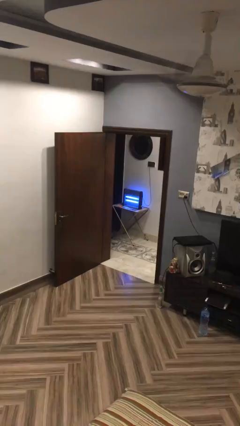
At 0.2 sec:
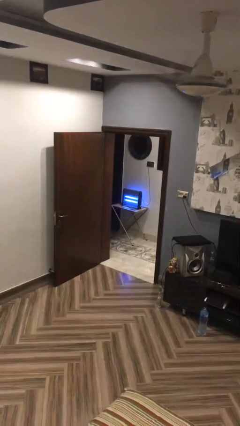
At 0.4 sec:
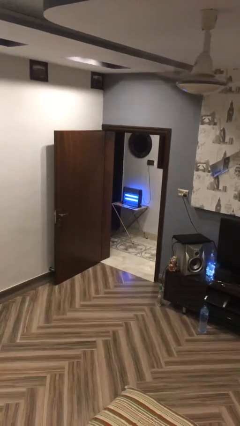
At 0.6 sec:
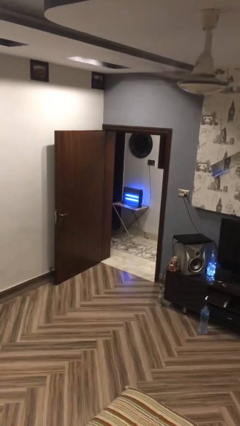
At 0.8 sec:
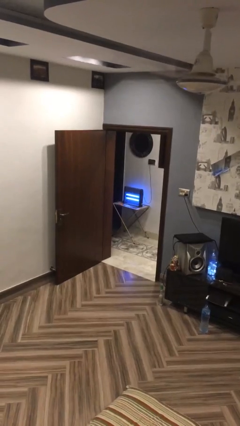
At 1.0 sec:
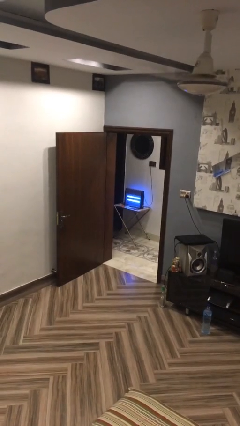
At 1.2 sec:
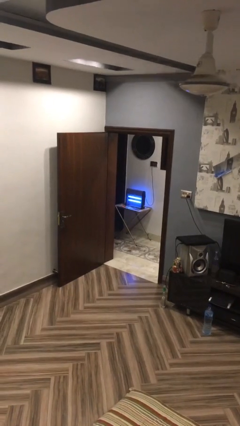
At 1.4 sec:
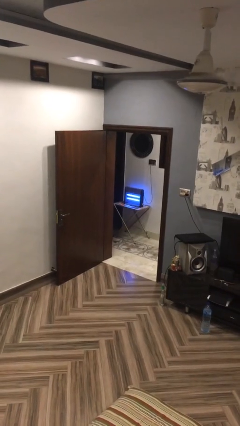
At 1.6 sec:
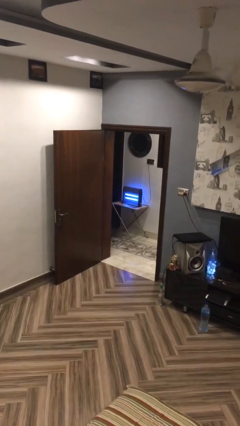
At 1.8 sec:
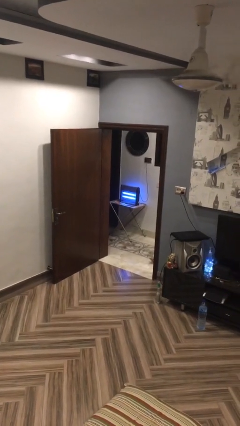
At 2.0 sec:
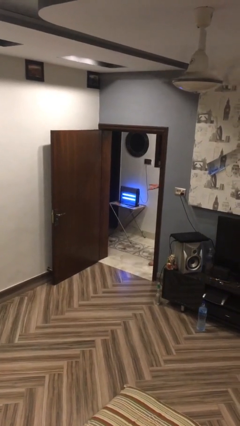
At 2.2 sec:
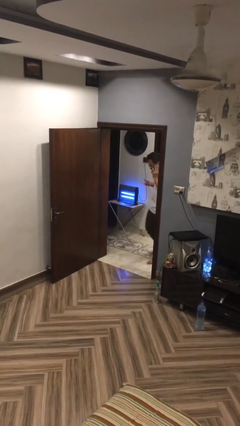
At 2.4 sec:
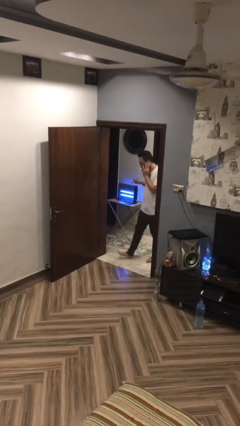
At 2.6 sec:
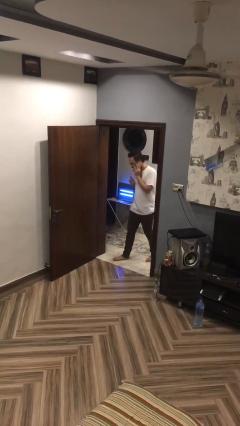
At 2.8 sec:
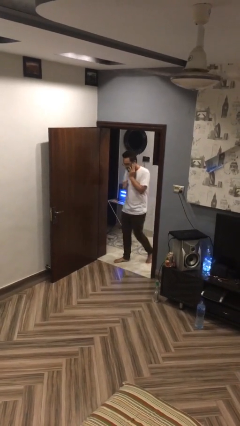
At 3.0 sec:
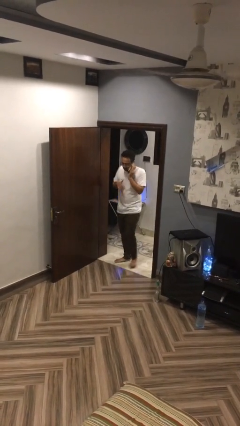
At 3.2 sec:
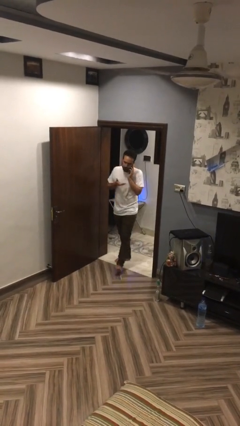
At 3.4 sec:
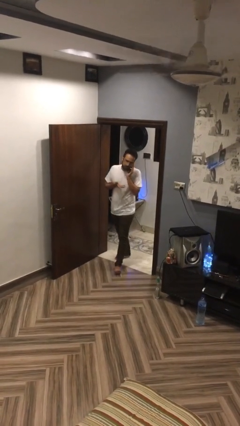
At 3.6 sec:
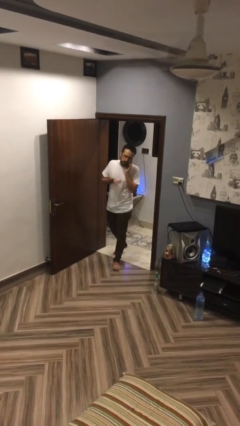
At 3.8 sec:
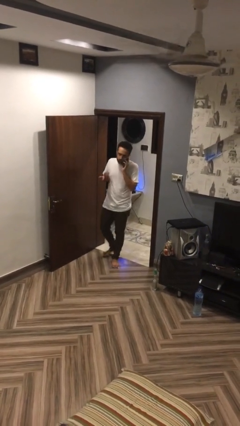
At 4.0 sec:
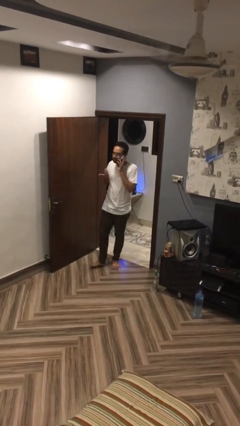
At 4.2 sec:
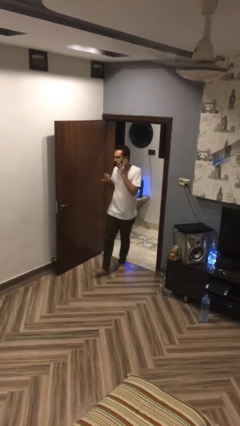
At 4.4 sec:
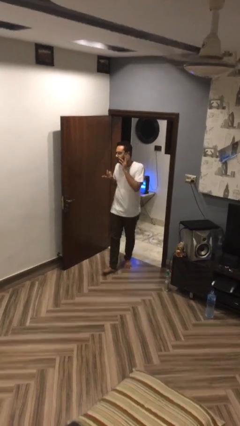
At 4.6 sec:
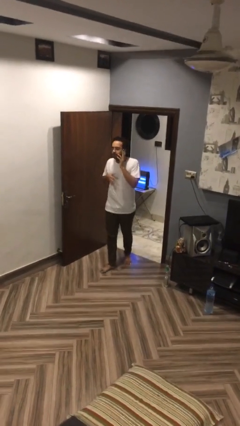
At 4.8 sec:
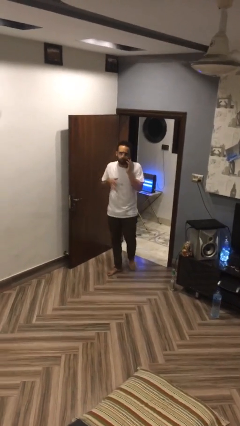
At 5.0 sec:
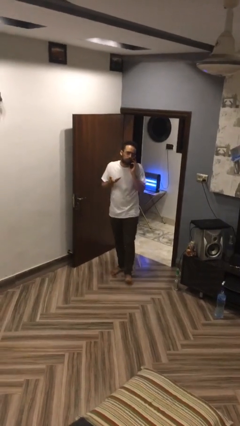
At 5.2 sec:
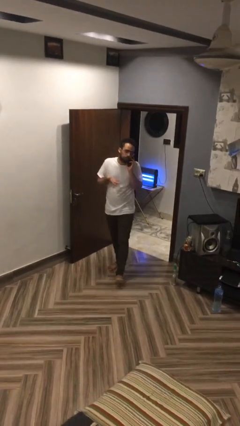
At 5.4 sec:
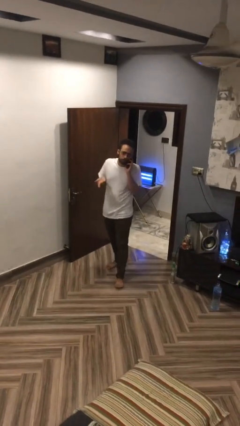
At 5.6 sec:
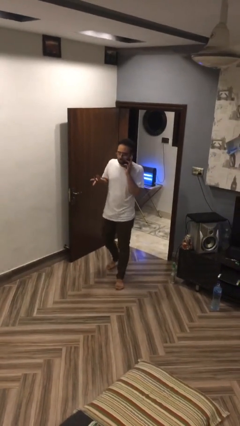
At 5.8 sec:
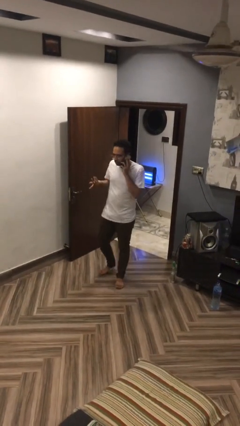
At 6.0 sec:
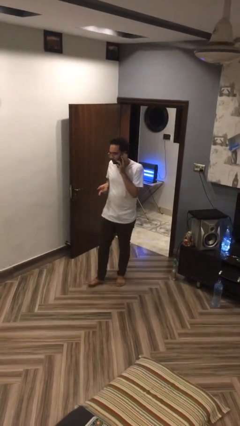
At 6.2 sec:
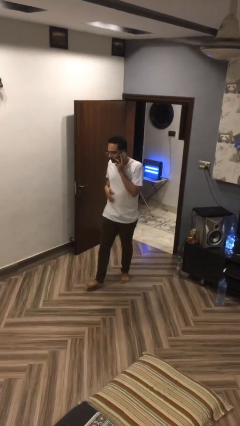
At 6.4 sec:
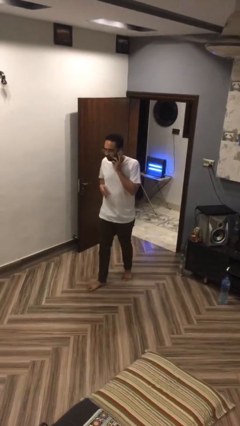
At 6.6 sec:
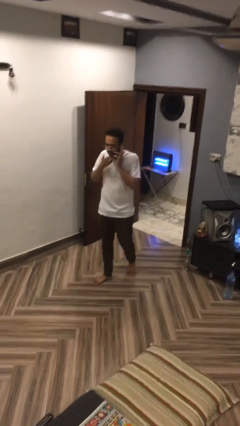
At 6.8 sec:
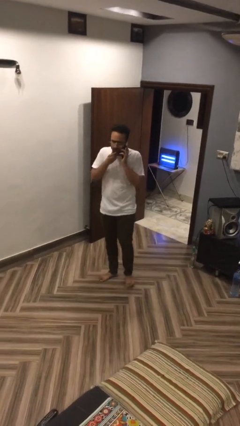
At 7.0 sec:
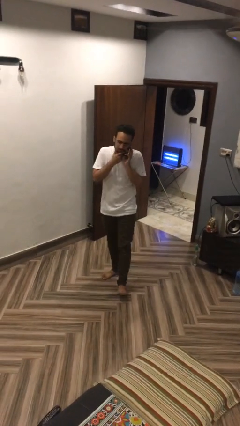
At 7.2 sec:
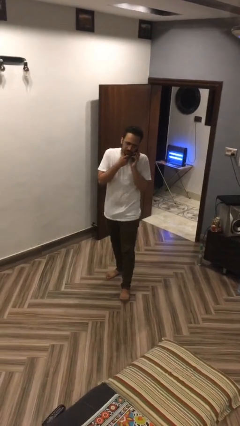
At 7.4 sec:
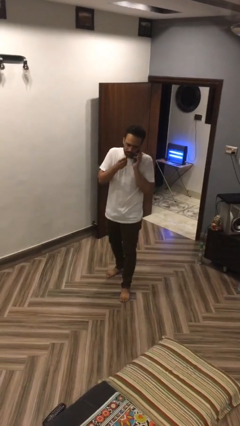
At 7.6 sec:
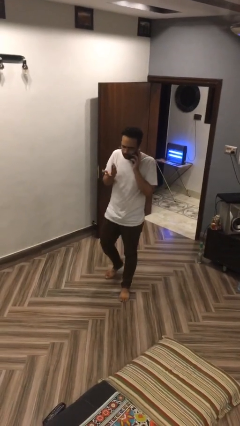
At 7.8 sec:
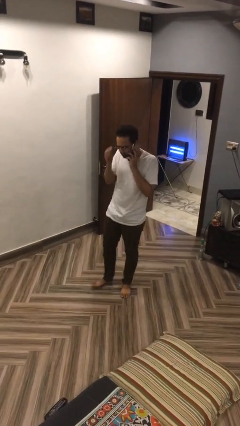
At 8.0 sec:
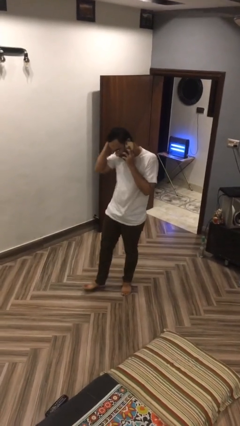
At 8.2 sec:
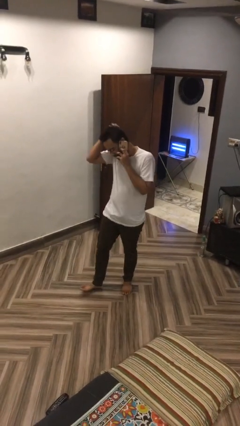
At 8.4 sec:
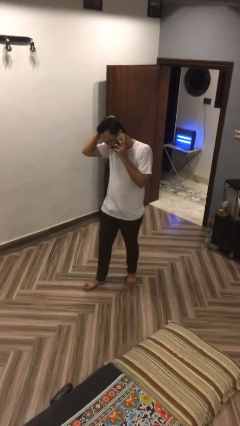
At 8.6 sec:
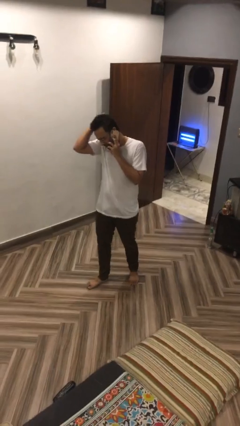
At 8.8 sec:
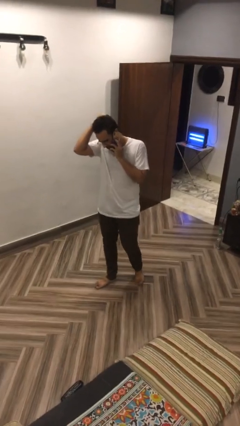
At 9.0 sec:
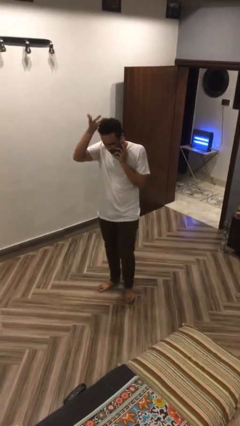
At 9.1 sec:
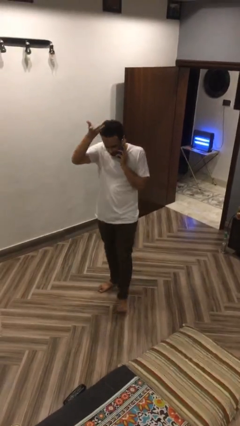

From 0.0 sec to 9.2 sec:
person enters scene through structure

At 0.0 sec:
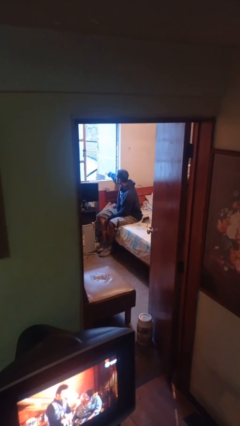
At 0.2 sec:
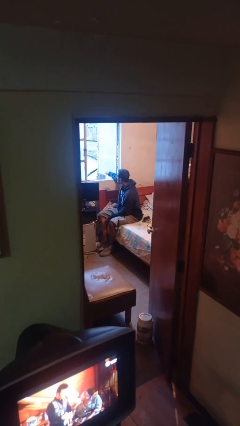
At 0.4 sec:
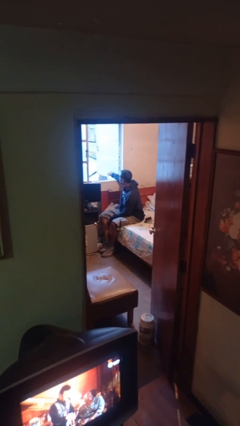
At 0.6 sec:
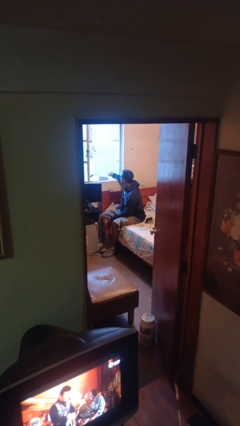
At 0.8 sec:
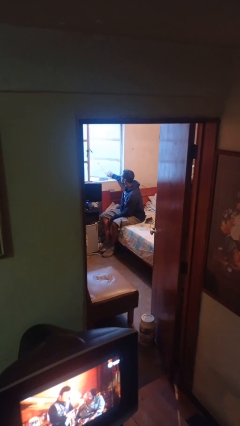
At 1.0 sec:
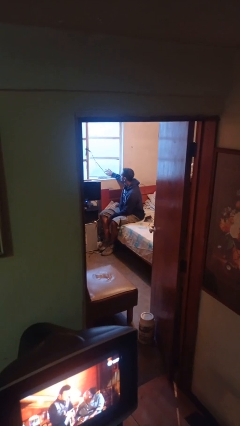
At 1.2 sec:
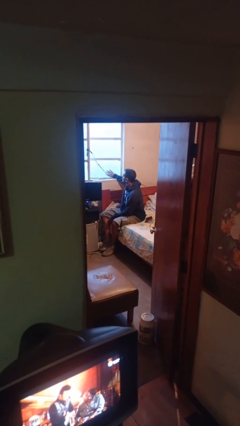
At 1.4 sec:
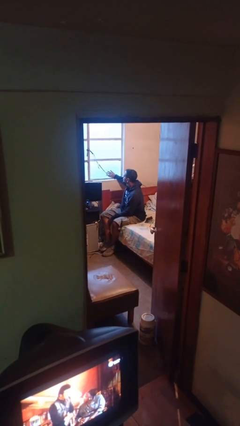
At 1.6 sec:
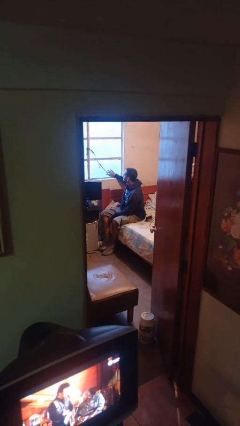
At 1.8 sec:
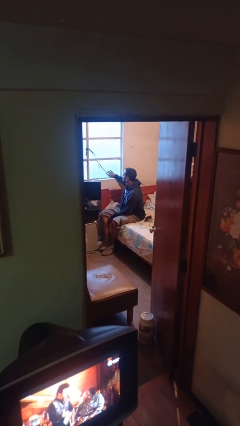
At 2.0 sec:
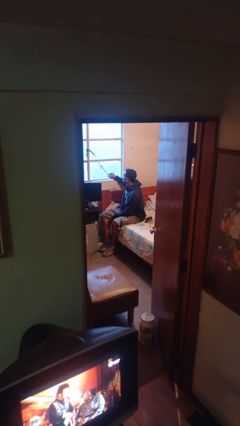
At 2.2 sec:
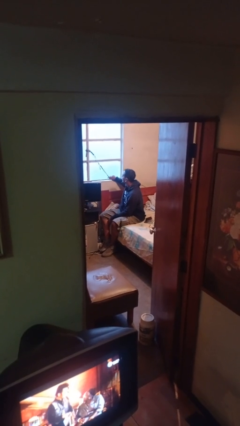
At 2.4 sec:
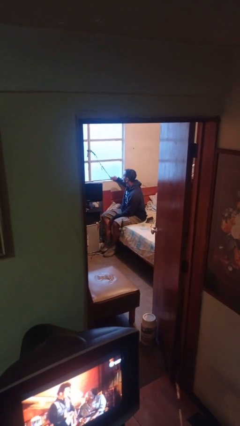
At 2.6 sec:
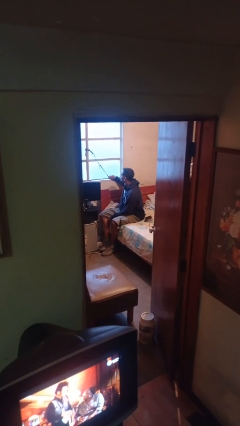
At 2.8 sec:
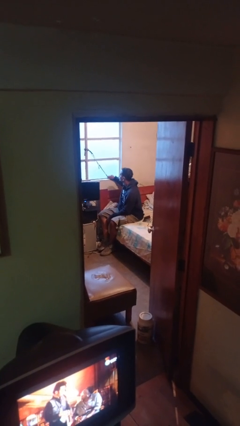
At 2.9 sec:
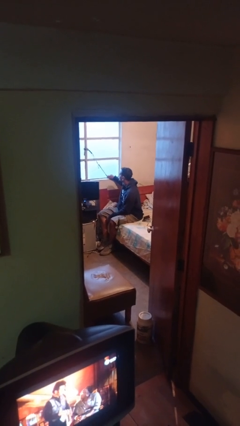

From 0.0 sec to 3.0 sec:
person closes home window

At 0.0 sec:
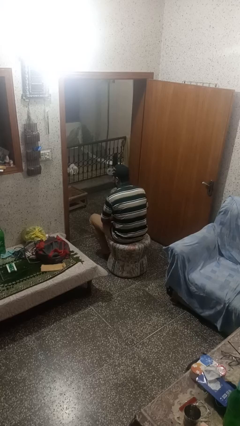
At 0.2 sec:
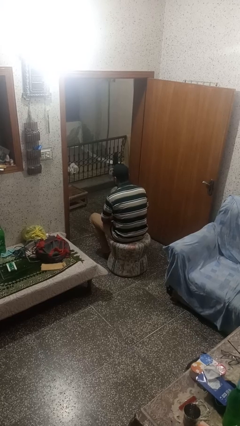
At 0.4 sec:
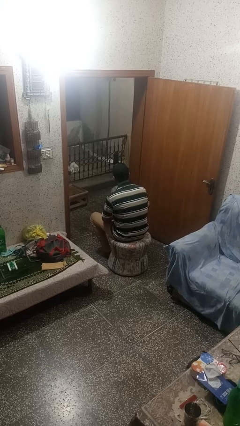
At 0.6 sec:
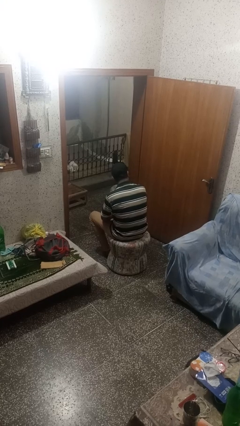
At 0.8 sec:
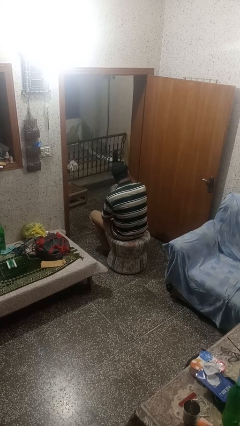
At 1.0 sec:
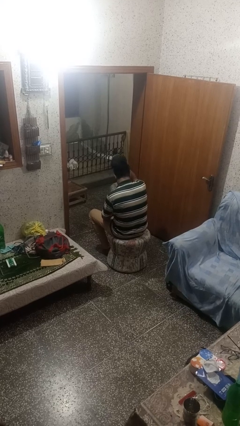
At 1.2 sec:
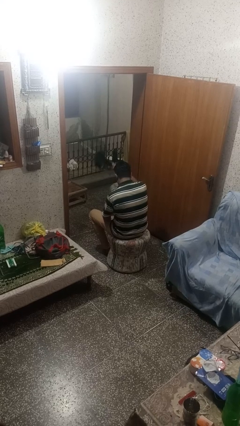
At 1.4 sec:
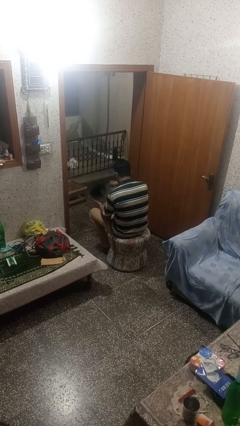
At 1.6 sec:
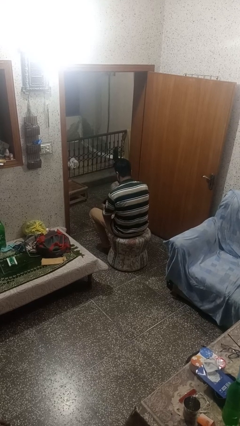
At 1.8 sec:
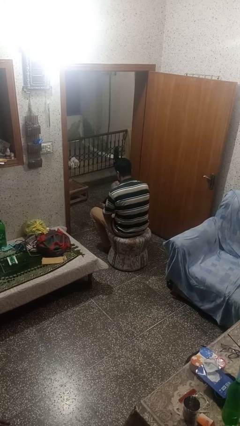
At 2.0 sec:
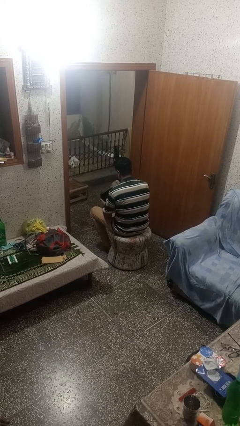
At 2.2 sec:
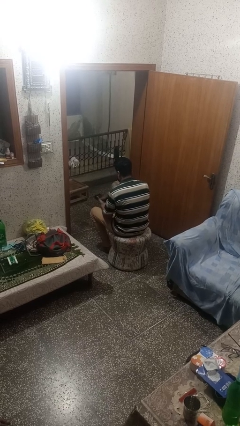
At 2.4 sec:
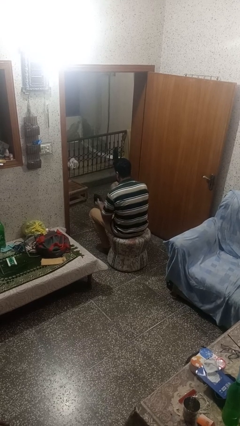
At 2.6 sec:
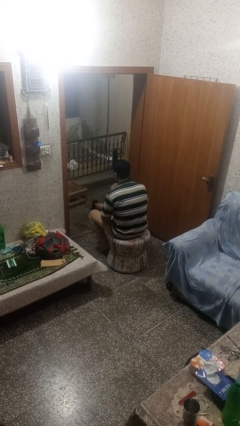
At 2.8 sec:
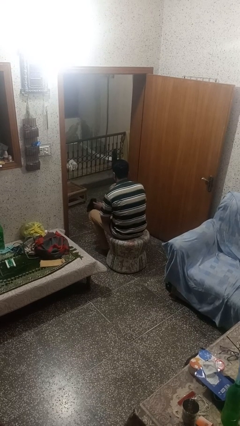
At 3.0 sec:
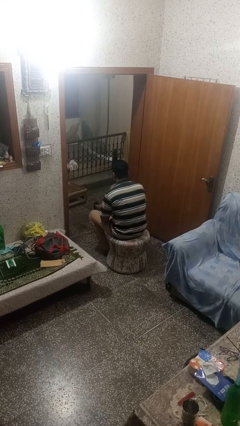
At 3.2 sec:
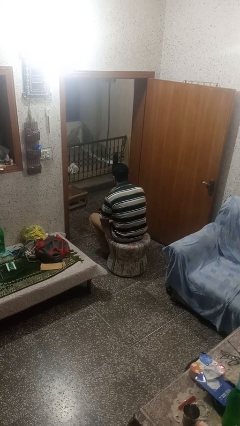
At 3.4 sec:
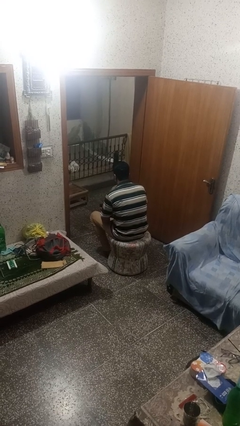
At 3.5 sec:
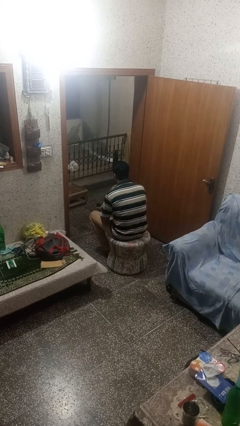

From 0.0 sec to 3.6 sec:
person takes off hat

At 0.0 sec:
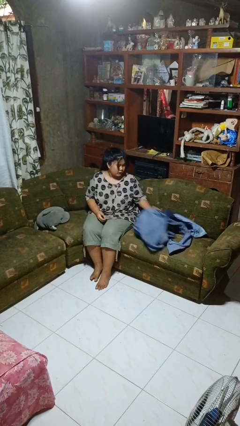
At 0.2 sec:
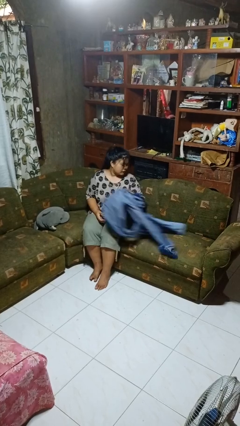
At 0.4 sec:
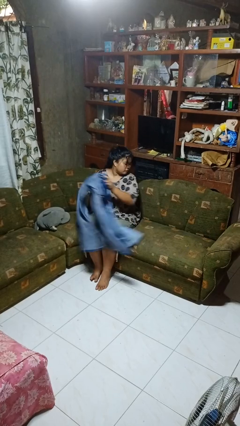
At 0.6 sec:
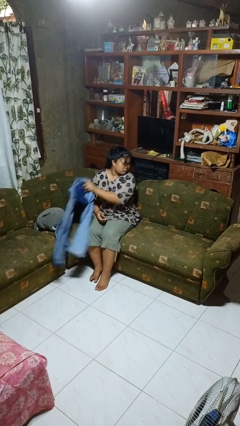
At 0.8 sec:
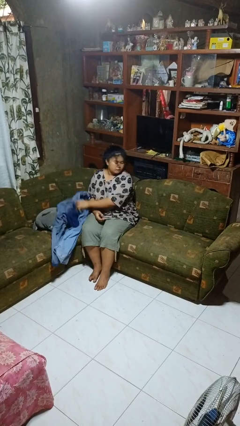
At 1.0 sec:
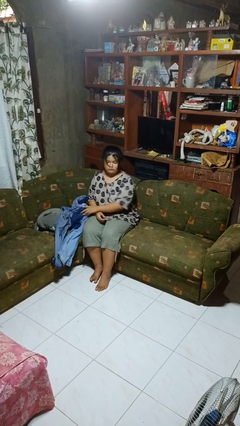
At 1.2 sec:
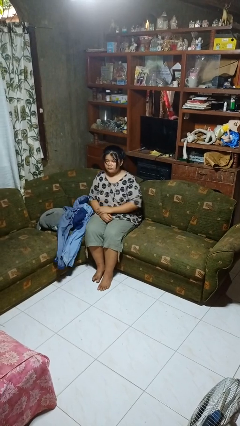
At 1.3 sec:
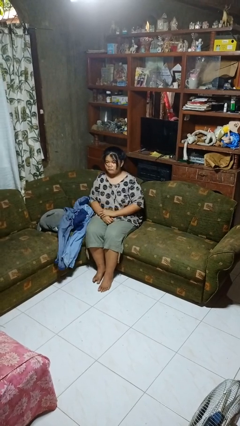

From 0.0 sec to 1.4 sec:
person searches in couch

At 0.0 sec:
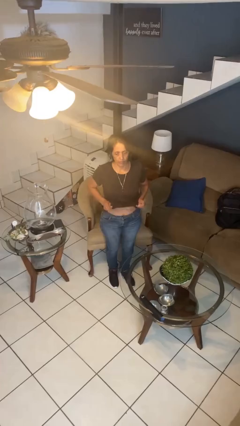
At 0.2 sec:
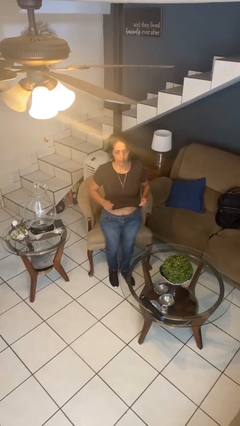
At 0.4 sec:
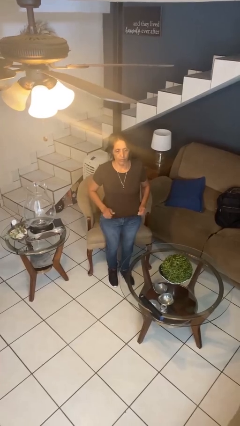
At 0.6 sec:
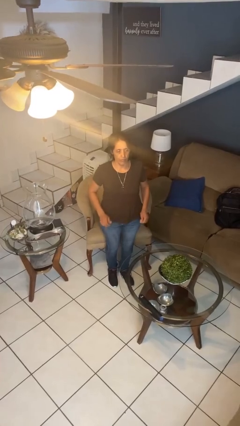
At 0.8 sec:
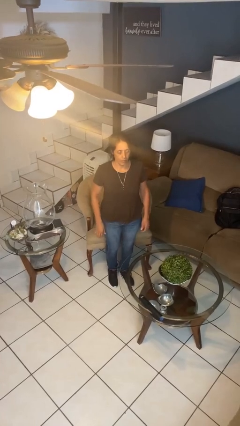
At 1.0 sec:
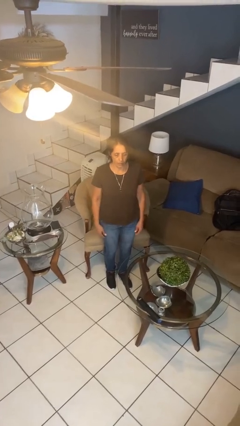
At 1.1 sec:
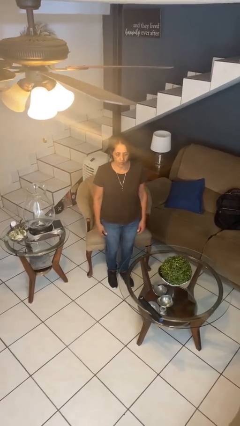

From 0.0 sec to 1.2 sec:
person untucks shirt
